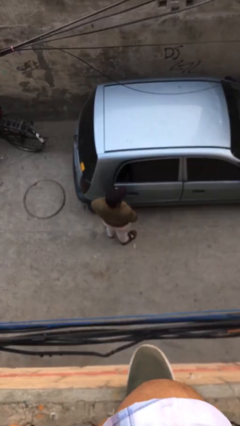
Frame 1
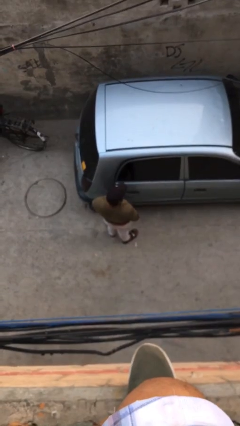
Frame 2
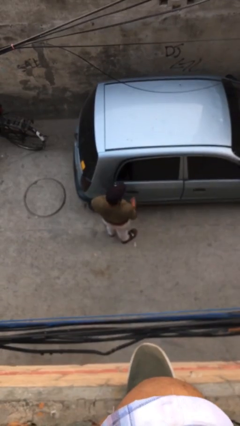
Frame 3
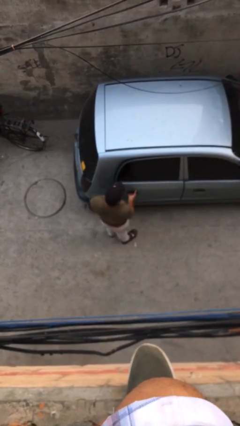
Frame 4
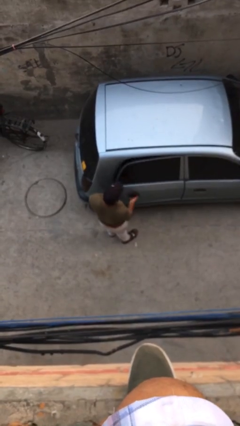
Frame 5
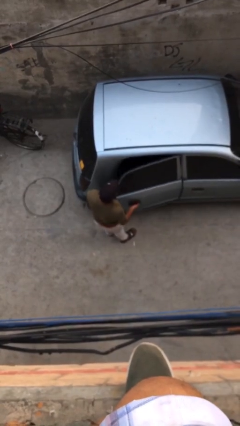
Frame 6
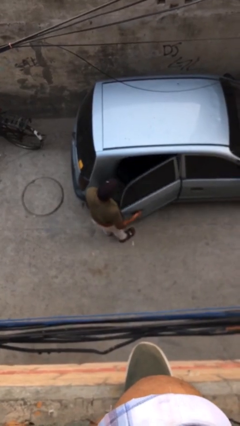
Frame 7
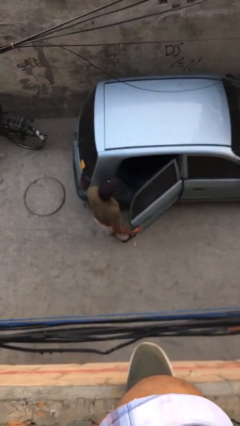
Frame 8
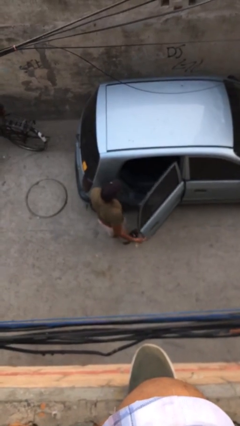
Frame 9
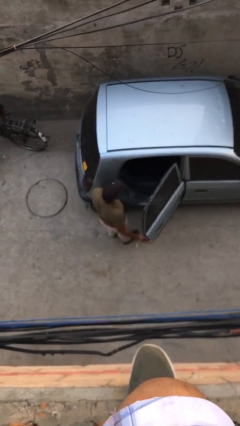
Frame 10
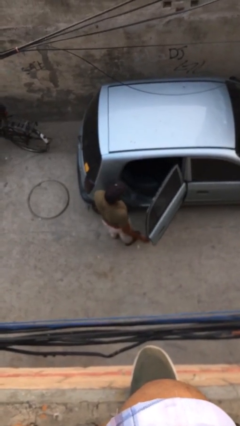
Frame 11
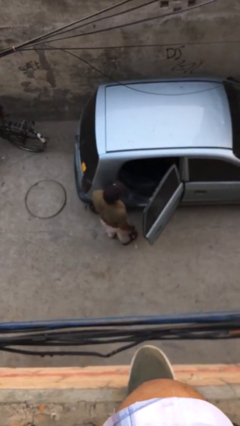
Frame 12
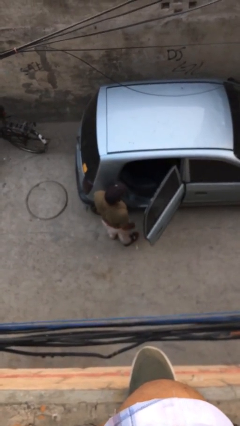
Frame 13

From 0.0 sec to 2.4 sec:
person opens car door

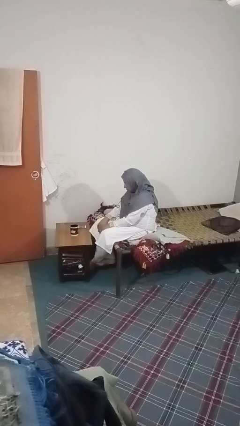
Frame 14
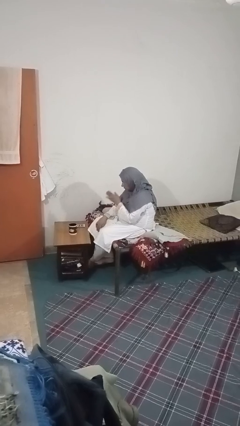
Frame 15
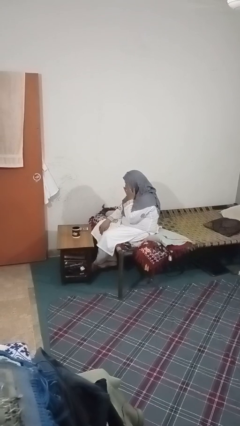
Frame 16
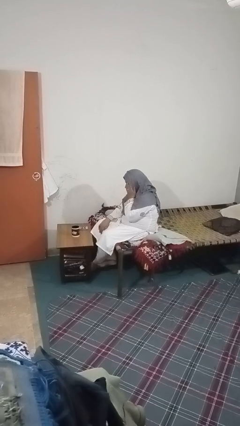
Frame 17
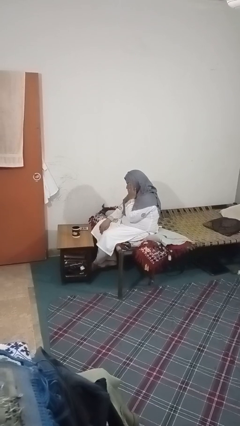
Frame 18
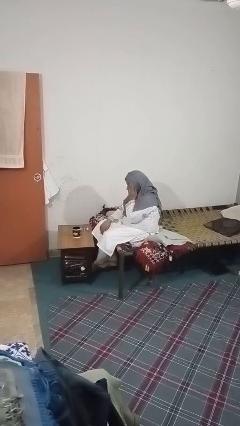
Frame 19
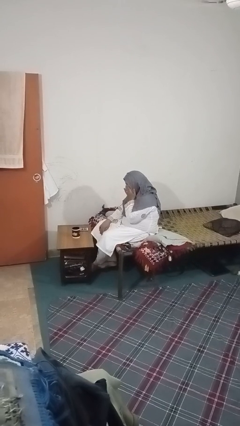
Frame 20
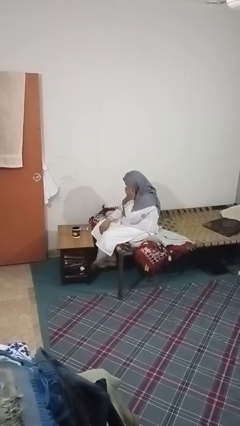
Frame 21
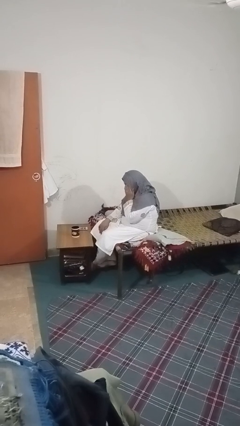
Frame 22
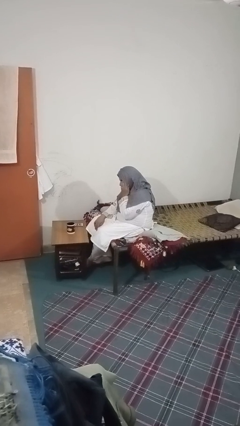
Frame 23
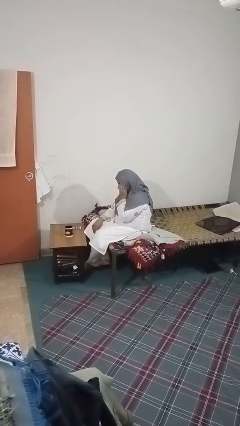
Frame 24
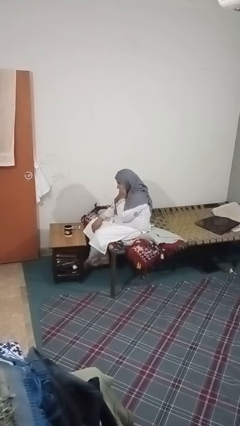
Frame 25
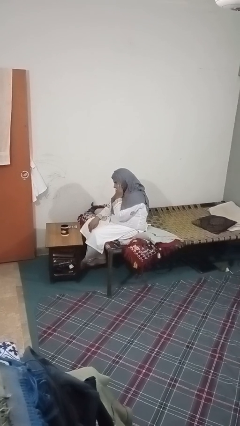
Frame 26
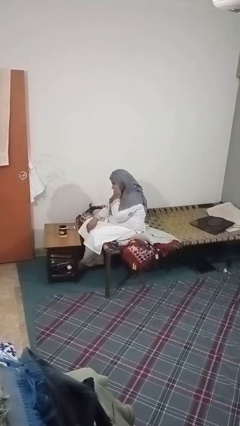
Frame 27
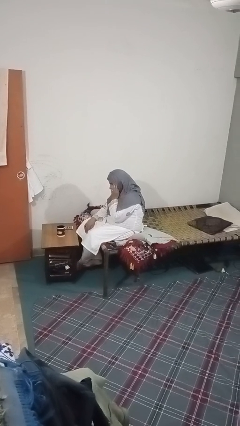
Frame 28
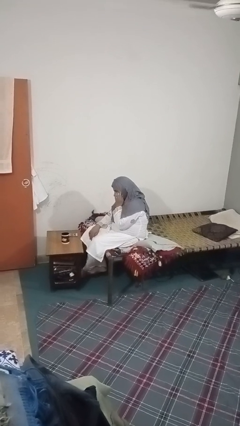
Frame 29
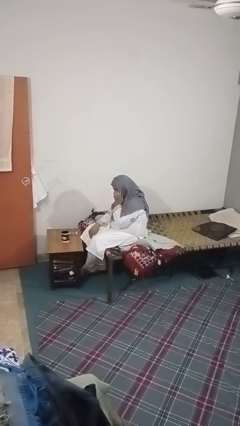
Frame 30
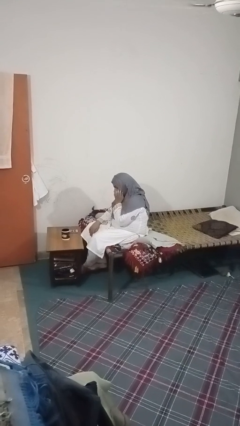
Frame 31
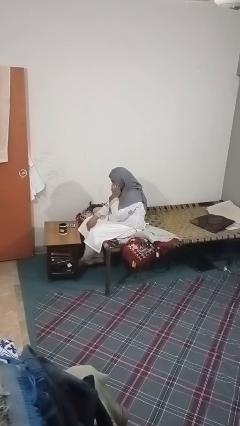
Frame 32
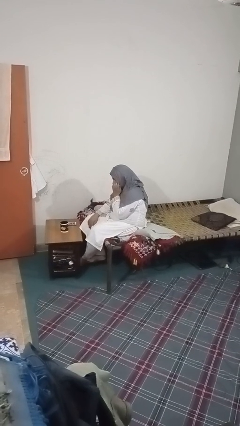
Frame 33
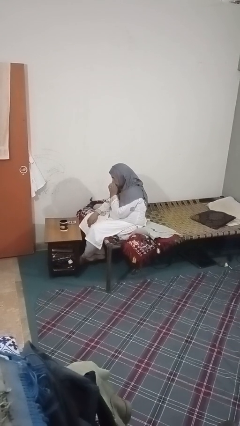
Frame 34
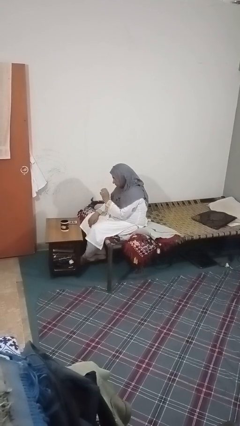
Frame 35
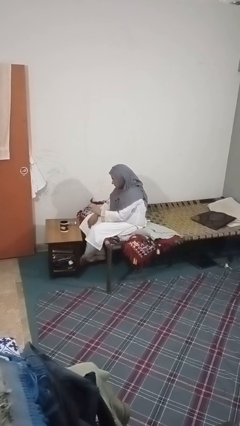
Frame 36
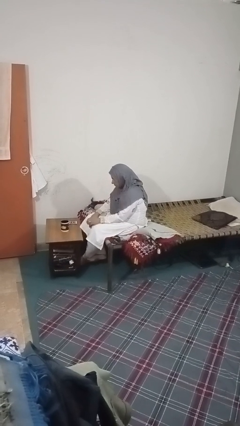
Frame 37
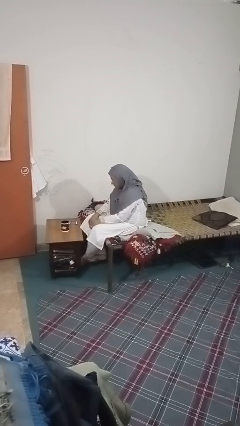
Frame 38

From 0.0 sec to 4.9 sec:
person rubs eyes

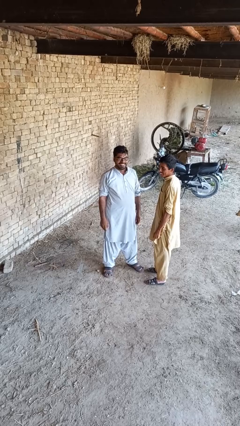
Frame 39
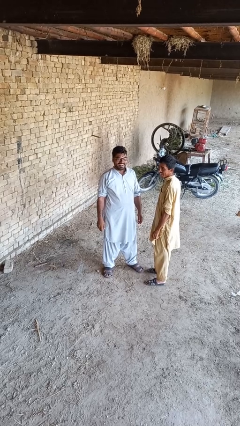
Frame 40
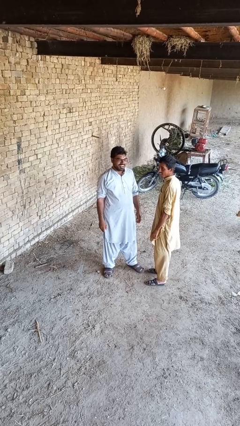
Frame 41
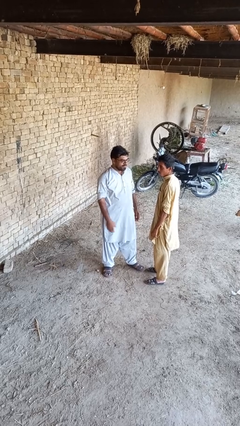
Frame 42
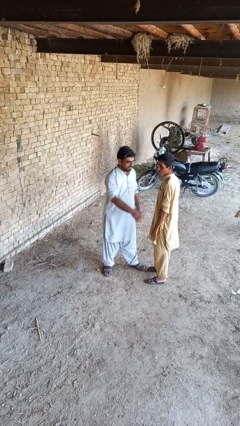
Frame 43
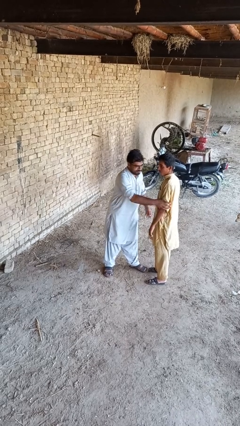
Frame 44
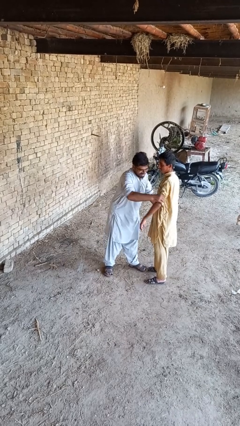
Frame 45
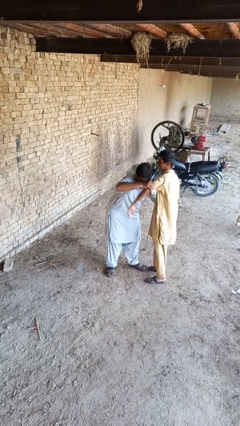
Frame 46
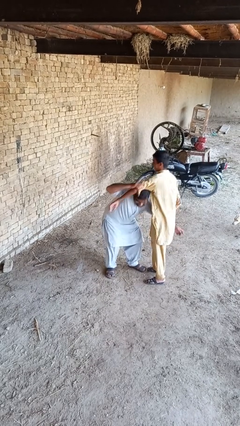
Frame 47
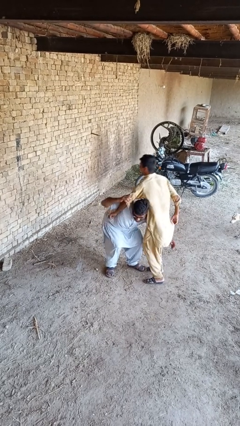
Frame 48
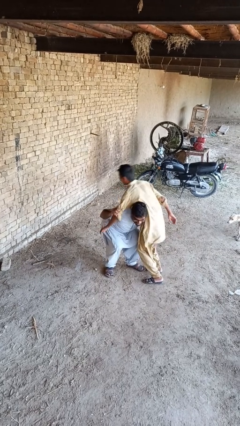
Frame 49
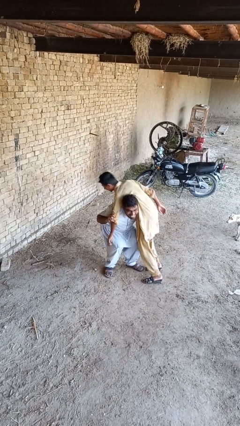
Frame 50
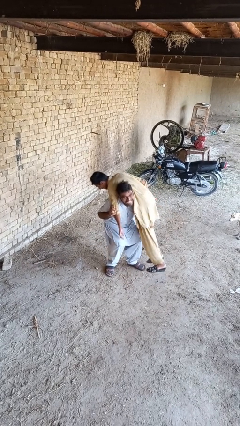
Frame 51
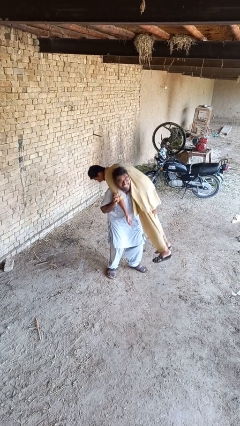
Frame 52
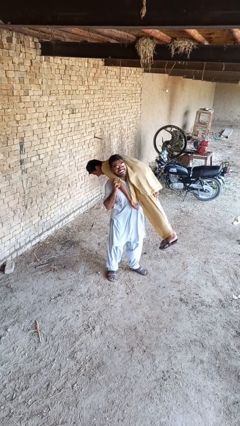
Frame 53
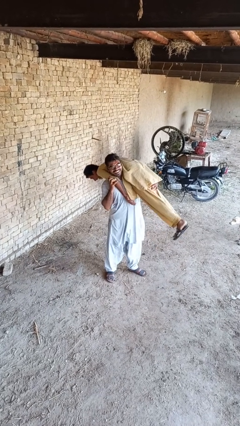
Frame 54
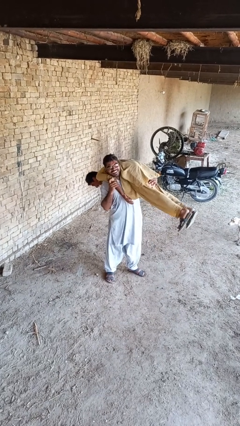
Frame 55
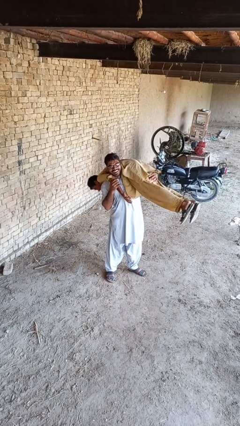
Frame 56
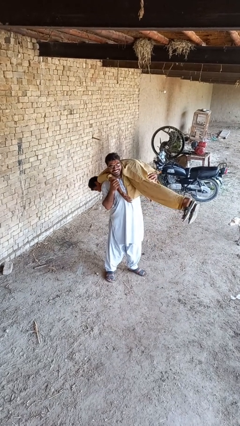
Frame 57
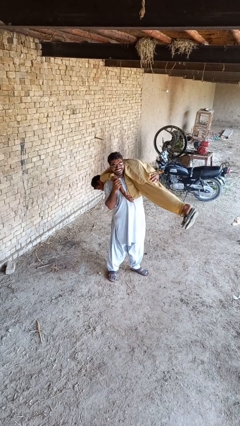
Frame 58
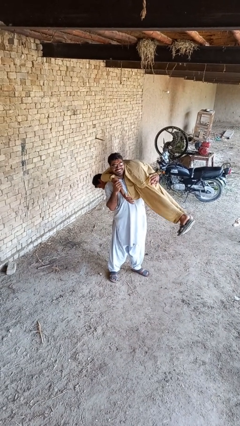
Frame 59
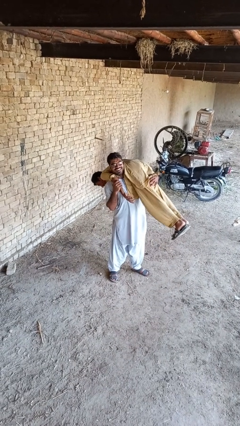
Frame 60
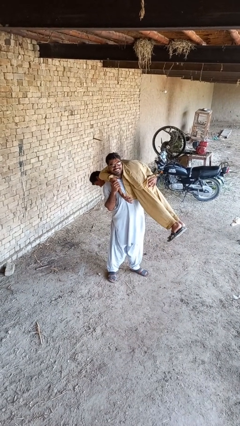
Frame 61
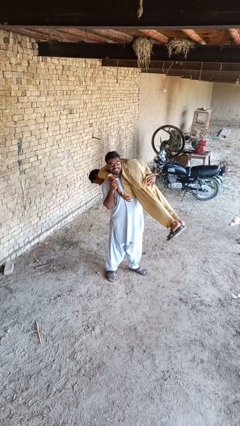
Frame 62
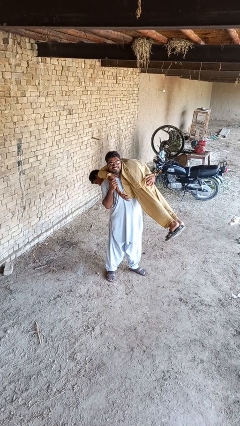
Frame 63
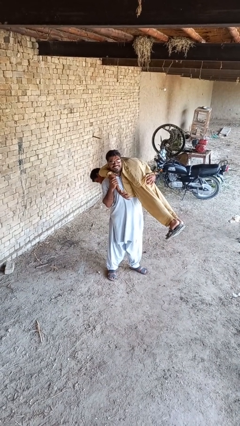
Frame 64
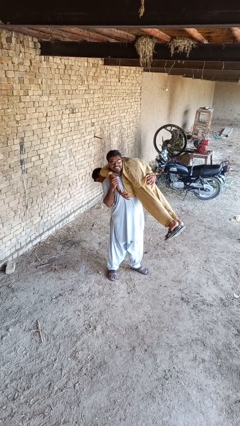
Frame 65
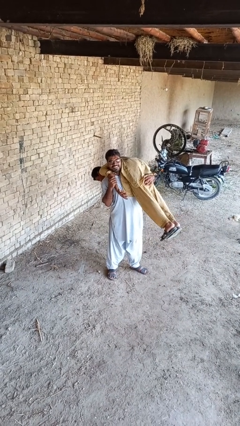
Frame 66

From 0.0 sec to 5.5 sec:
person carries person over shoulder

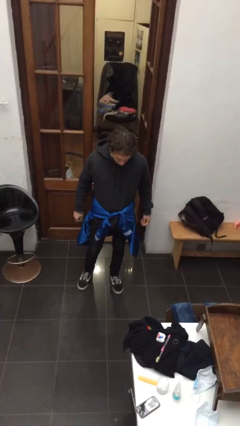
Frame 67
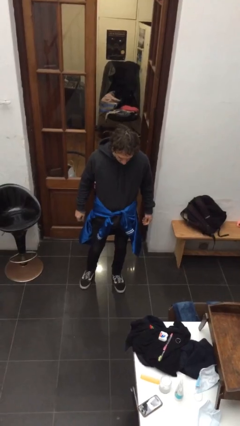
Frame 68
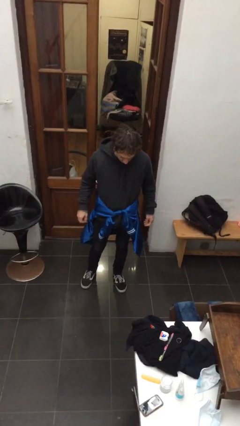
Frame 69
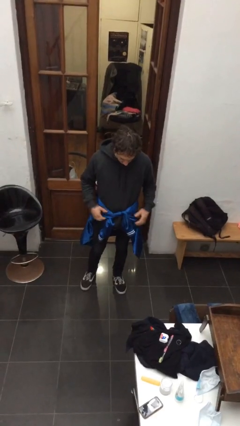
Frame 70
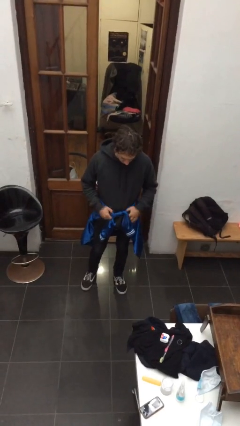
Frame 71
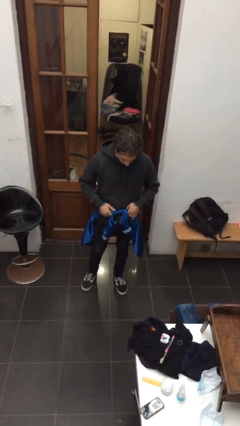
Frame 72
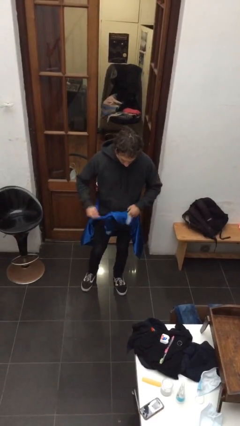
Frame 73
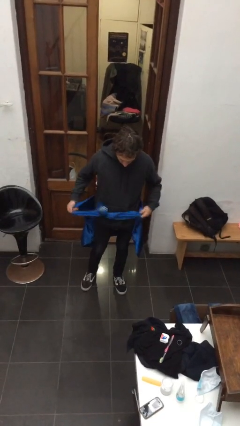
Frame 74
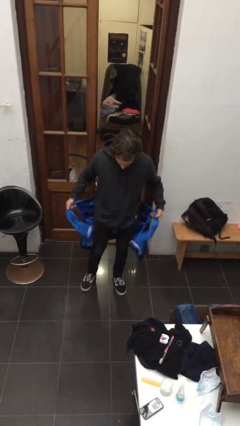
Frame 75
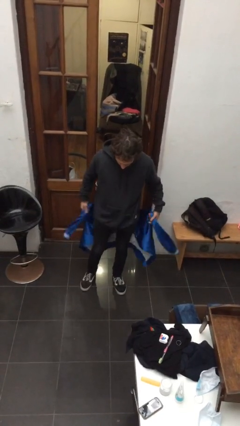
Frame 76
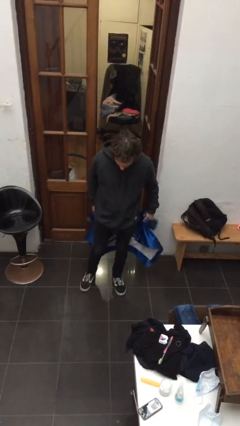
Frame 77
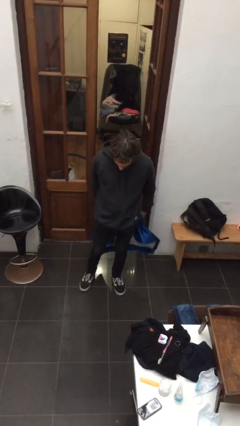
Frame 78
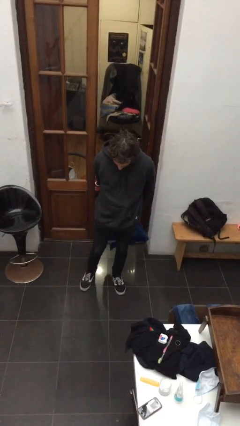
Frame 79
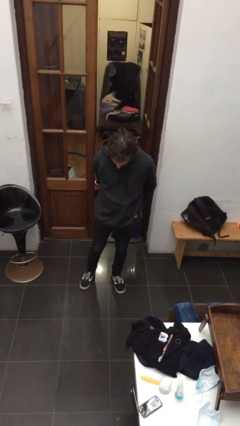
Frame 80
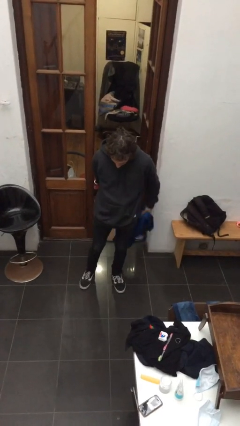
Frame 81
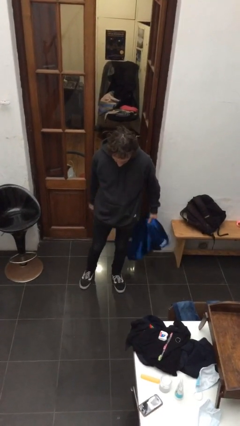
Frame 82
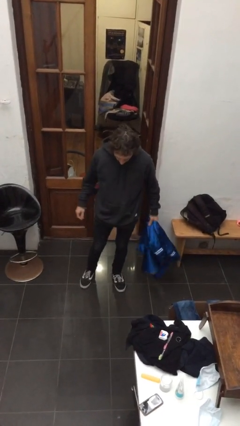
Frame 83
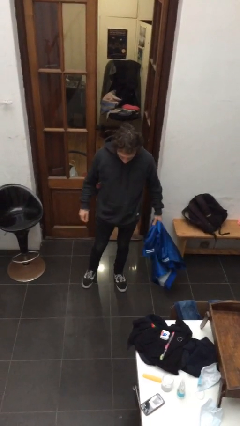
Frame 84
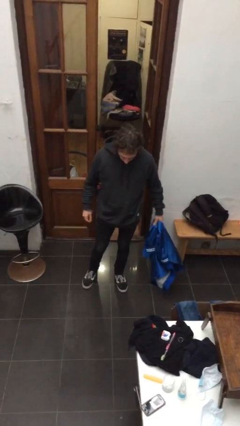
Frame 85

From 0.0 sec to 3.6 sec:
person unties jacket around waist

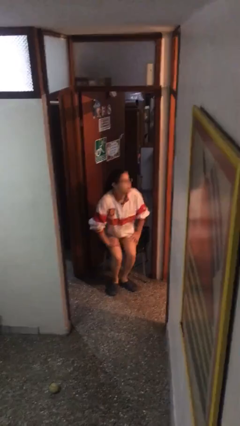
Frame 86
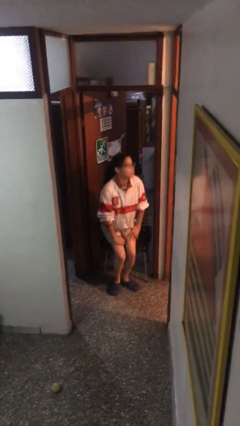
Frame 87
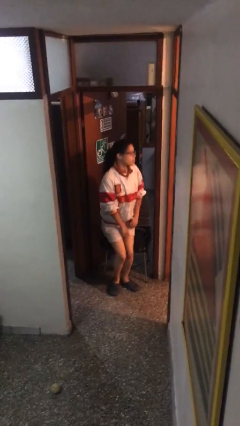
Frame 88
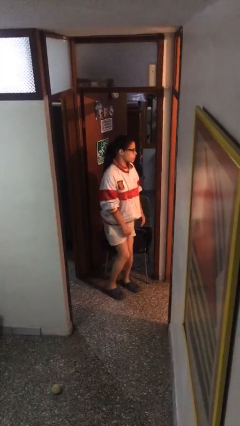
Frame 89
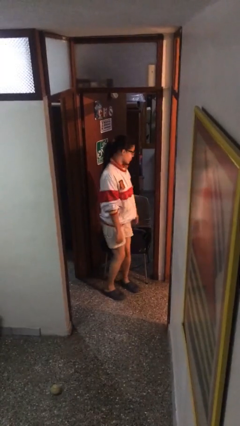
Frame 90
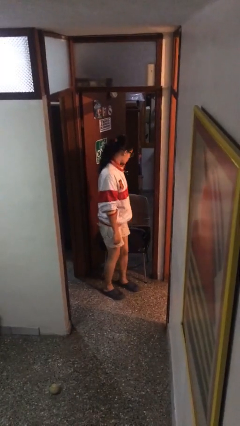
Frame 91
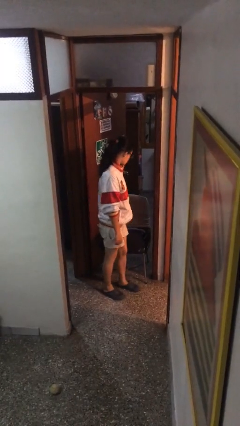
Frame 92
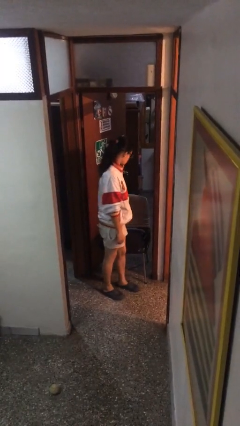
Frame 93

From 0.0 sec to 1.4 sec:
person stands up
